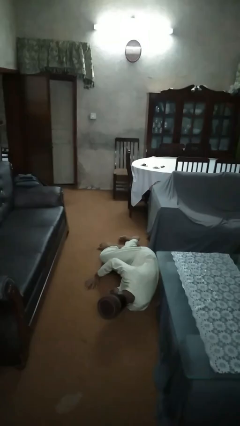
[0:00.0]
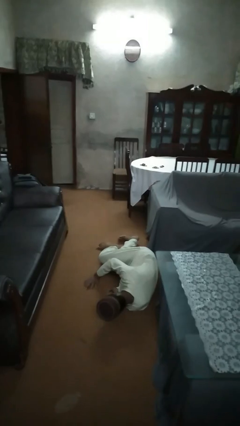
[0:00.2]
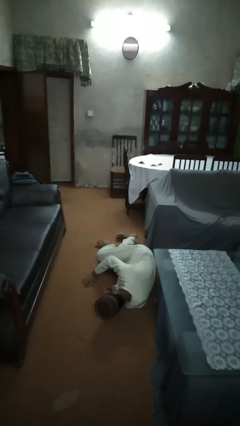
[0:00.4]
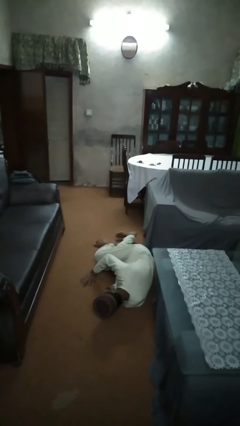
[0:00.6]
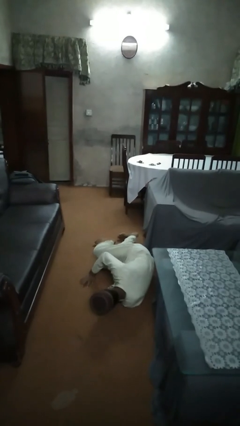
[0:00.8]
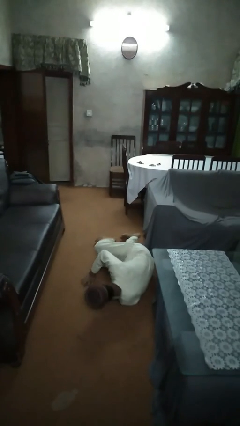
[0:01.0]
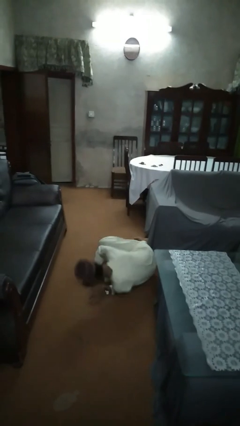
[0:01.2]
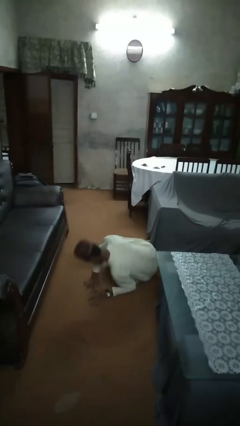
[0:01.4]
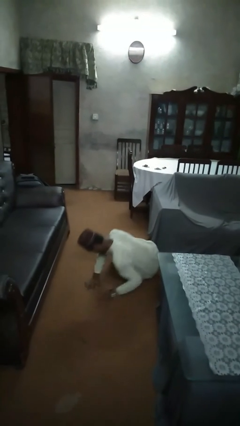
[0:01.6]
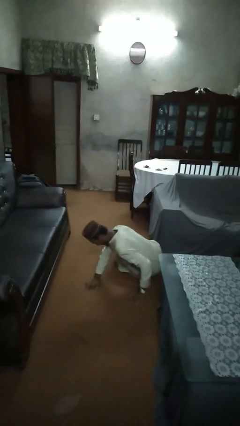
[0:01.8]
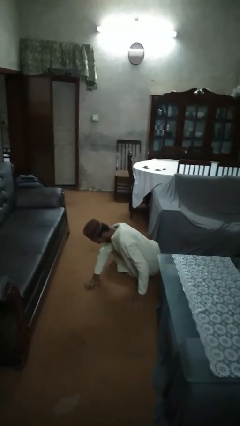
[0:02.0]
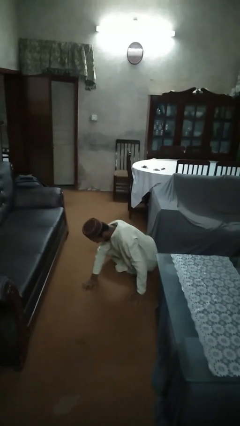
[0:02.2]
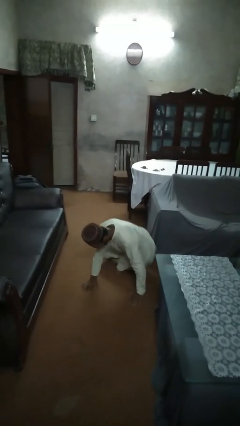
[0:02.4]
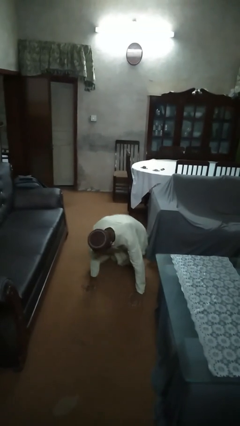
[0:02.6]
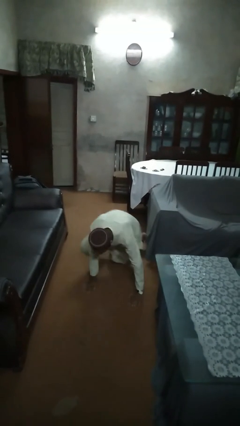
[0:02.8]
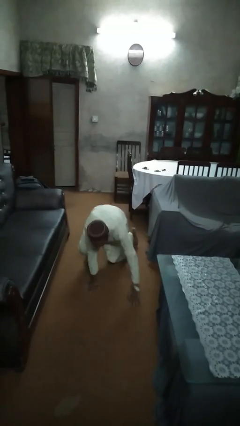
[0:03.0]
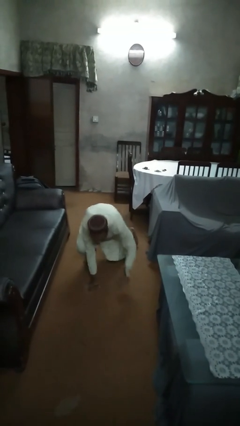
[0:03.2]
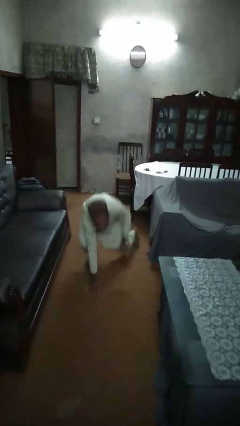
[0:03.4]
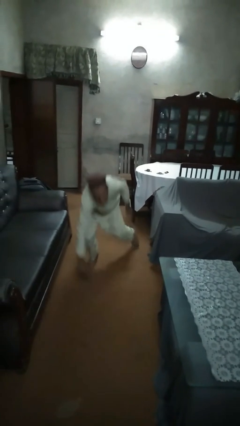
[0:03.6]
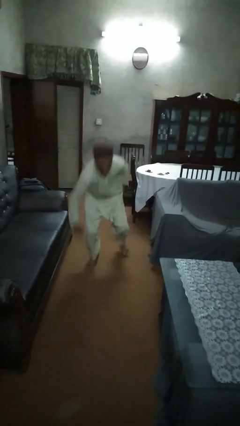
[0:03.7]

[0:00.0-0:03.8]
person stands up from floor

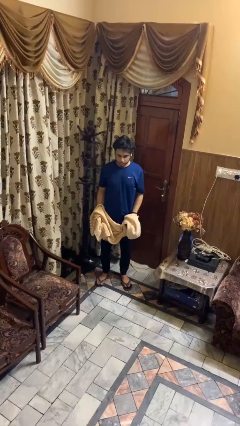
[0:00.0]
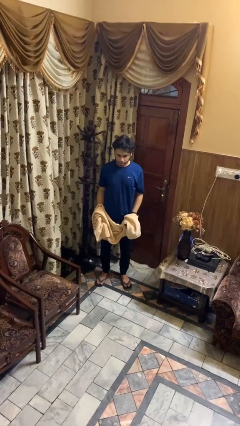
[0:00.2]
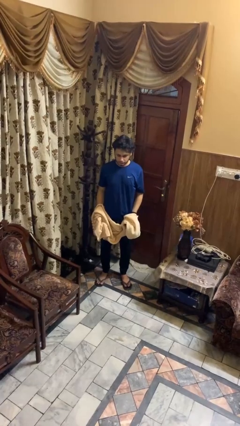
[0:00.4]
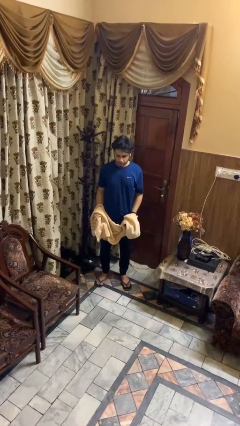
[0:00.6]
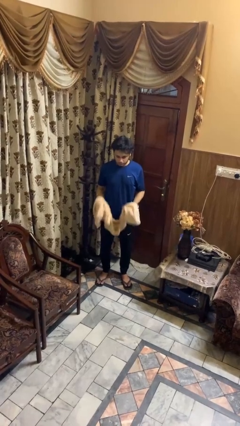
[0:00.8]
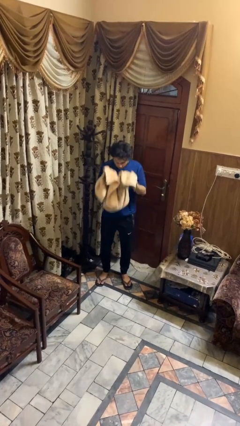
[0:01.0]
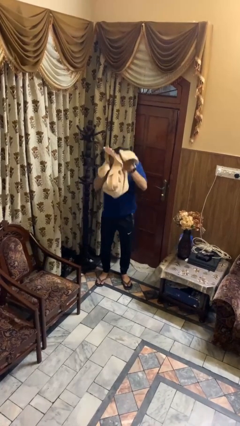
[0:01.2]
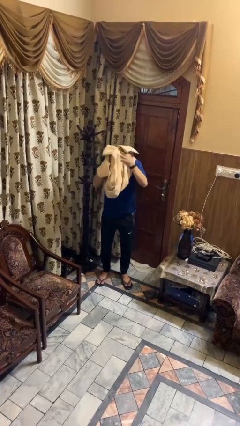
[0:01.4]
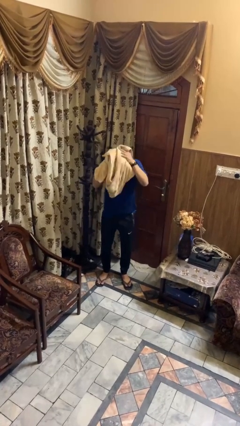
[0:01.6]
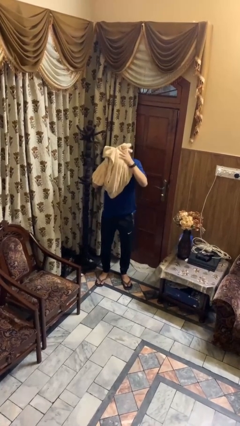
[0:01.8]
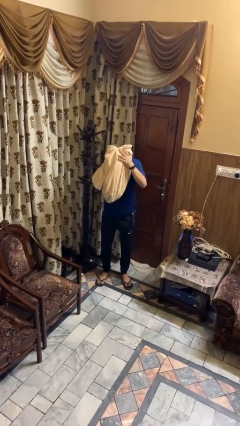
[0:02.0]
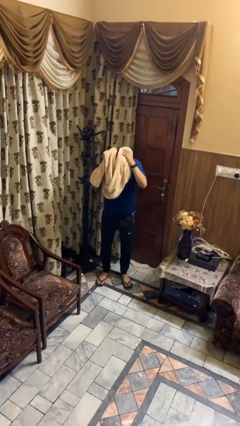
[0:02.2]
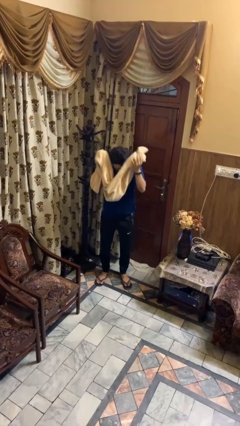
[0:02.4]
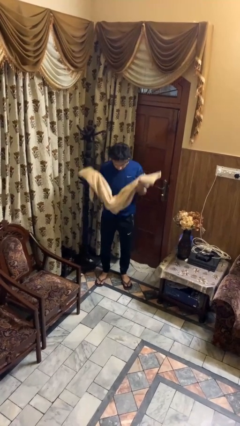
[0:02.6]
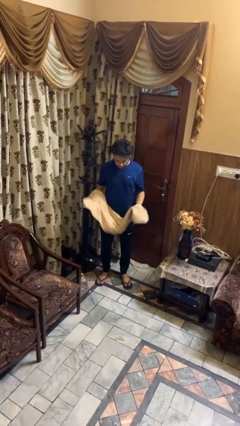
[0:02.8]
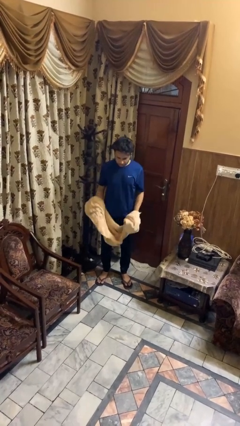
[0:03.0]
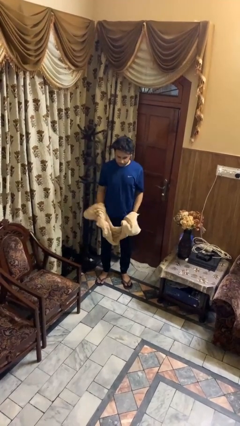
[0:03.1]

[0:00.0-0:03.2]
person dries hair with towel

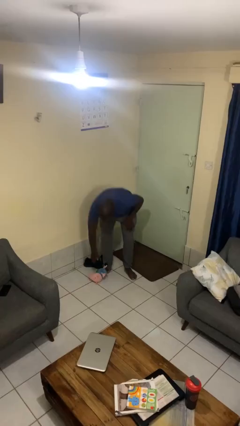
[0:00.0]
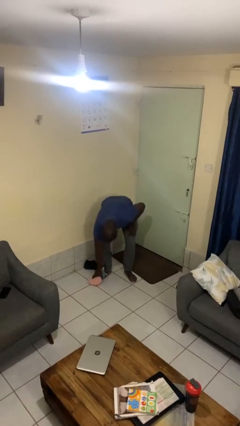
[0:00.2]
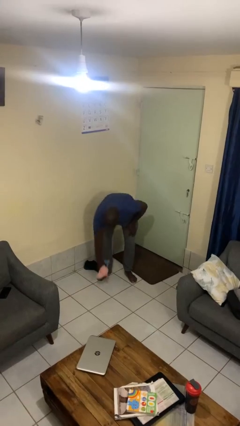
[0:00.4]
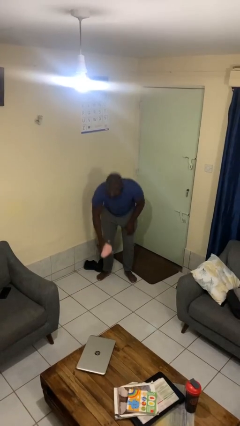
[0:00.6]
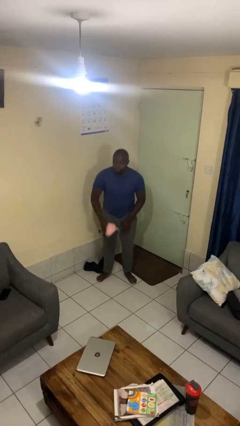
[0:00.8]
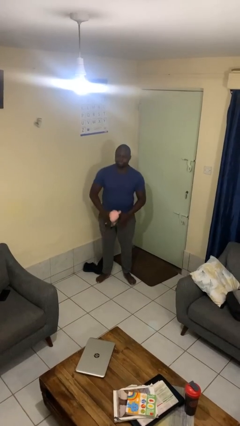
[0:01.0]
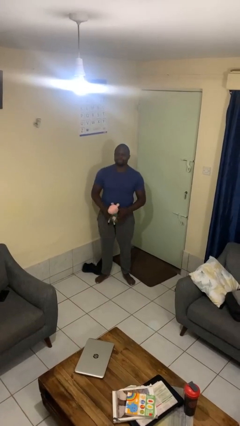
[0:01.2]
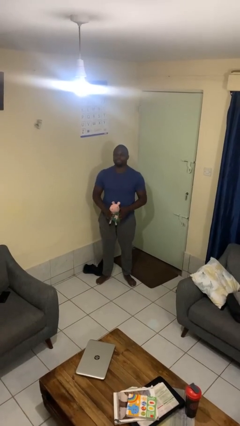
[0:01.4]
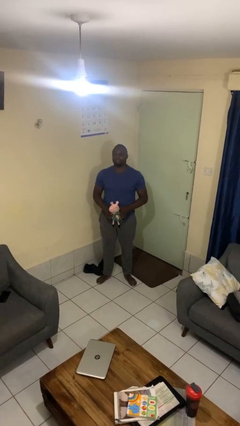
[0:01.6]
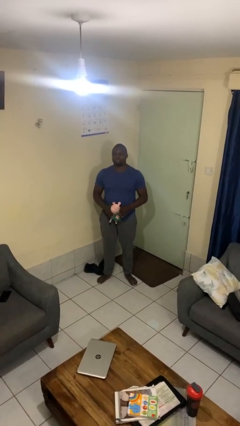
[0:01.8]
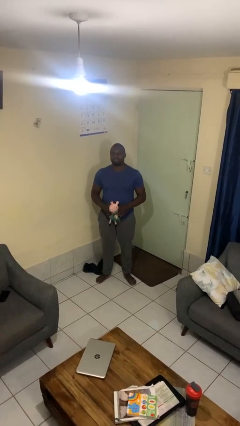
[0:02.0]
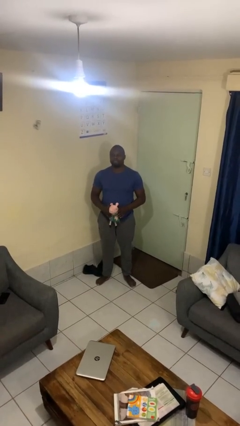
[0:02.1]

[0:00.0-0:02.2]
person picks up object from floor

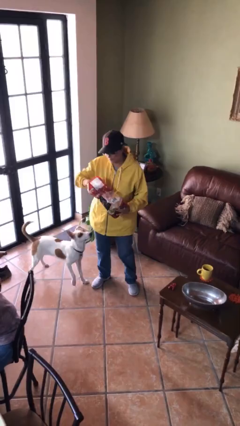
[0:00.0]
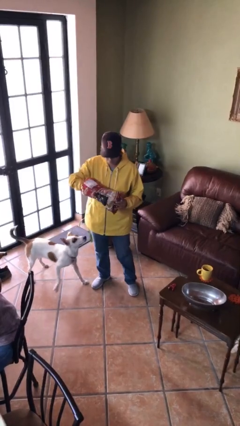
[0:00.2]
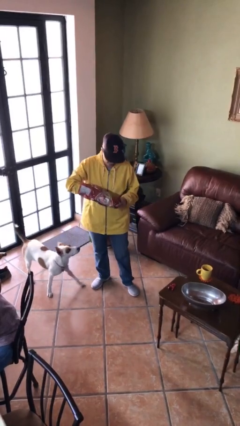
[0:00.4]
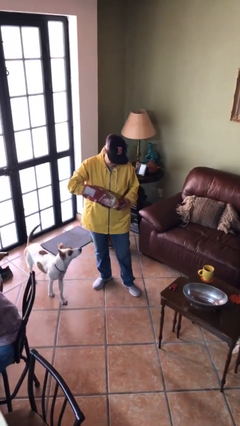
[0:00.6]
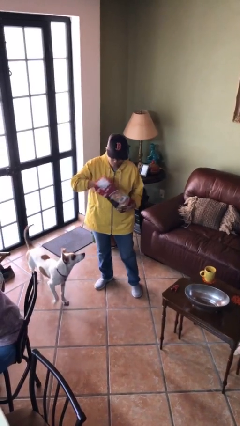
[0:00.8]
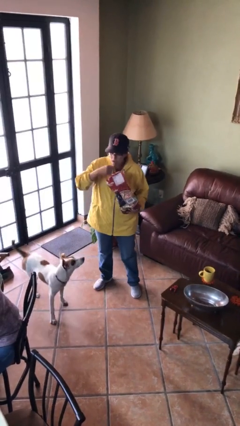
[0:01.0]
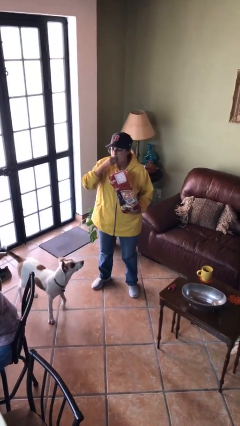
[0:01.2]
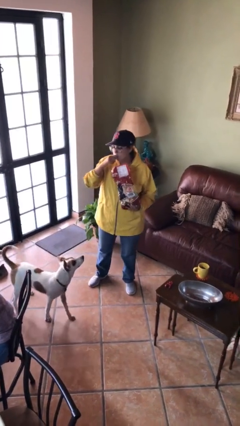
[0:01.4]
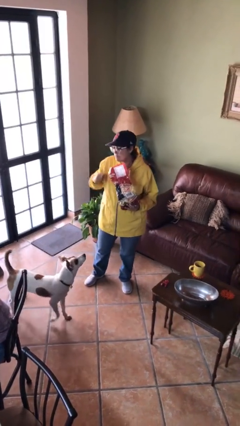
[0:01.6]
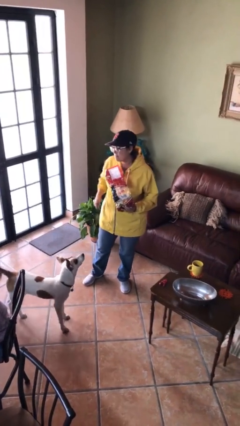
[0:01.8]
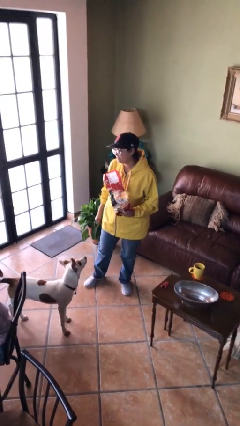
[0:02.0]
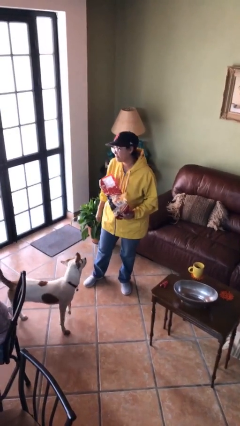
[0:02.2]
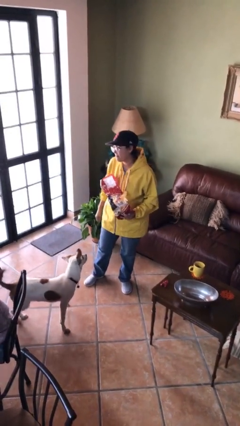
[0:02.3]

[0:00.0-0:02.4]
person eats snack from bag

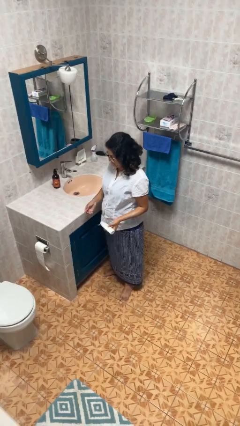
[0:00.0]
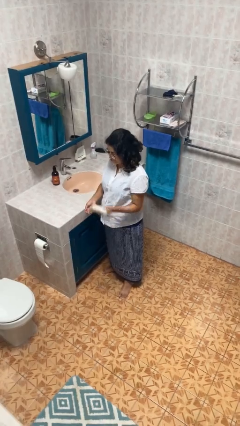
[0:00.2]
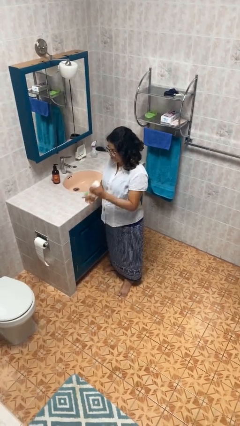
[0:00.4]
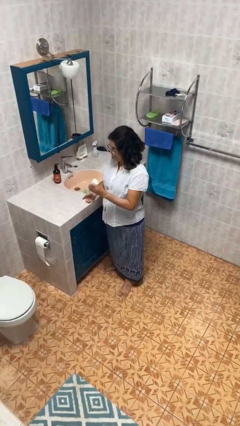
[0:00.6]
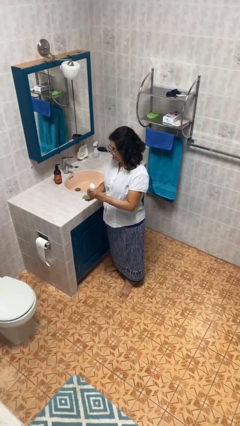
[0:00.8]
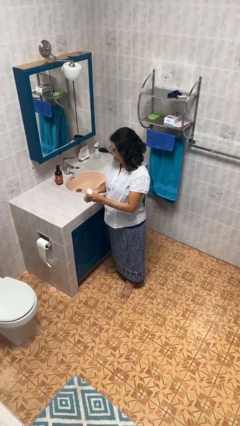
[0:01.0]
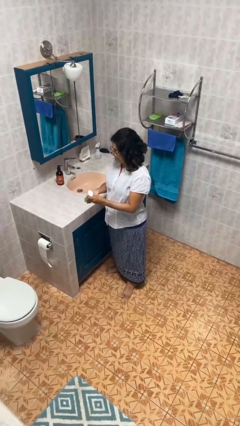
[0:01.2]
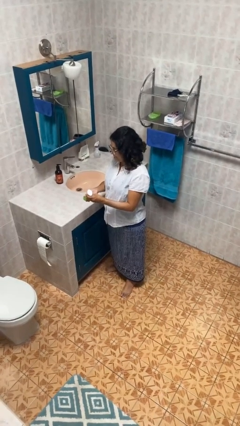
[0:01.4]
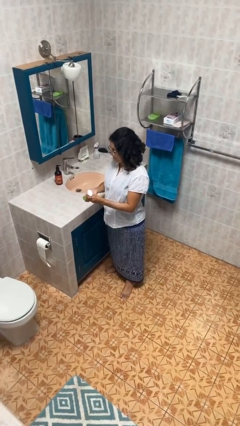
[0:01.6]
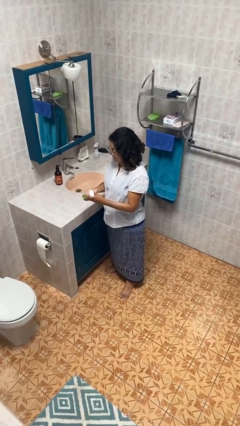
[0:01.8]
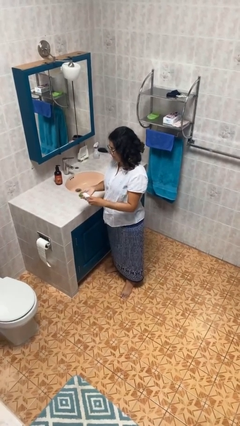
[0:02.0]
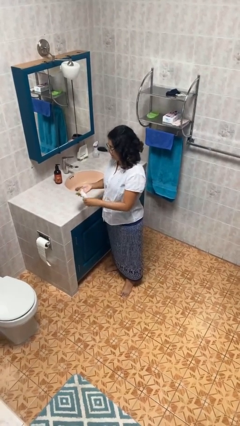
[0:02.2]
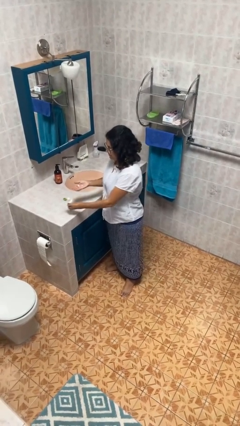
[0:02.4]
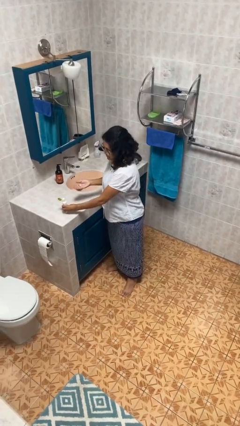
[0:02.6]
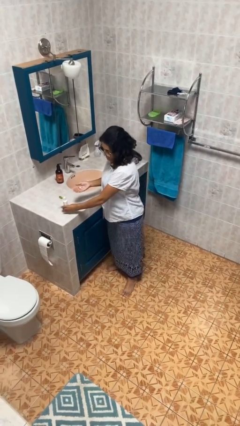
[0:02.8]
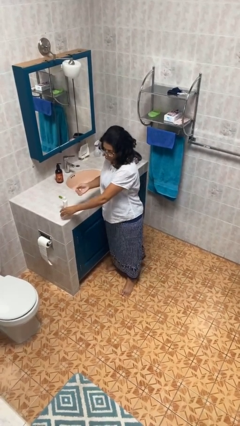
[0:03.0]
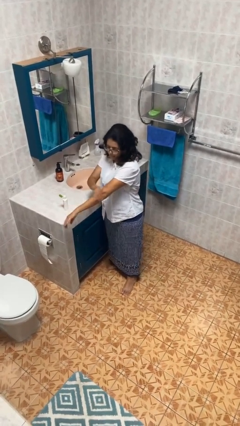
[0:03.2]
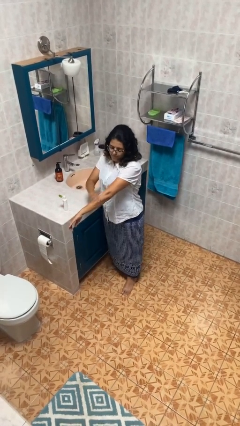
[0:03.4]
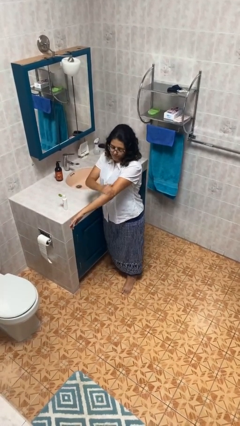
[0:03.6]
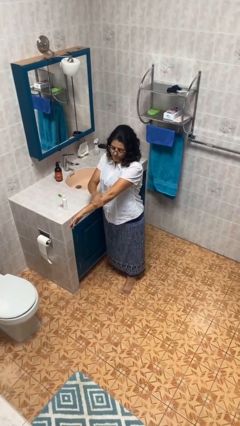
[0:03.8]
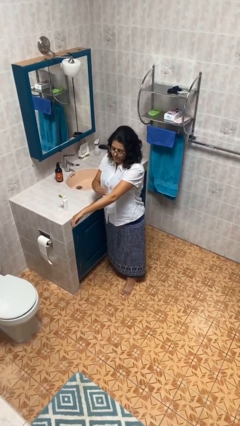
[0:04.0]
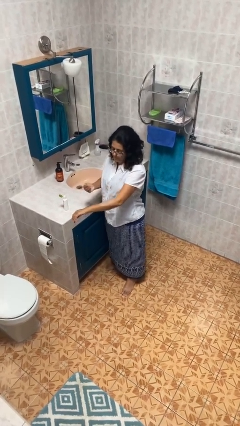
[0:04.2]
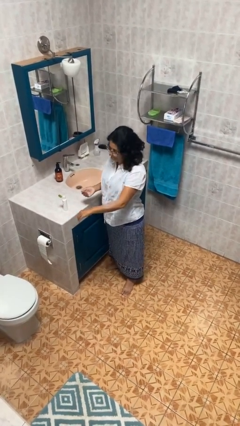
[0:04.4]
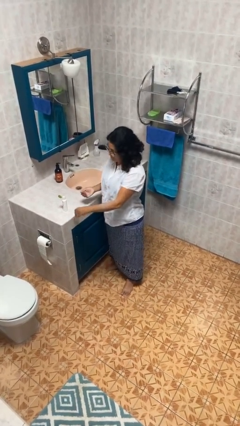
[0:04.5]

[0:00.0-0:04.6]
person applies sunscreen

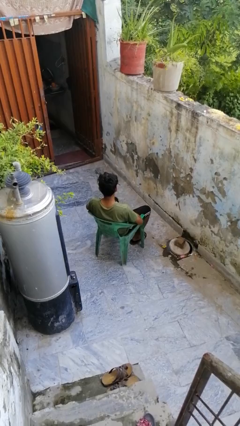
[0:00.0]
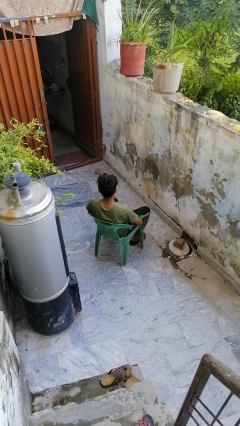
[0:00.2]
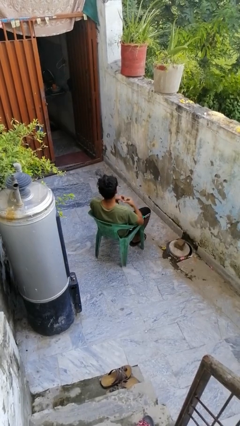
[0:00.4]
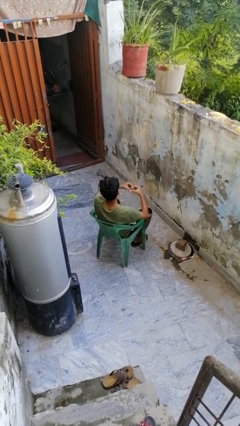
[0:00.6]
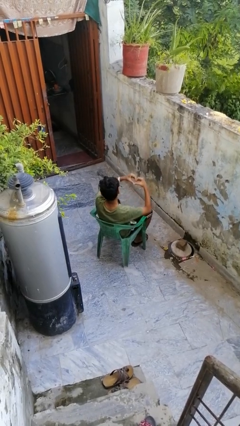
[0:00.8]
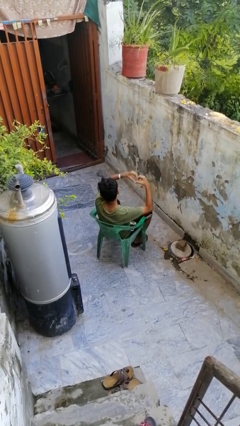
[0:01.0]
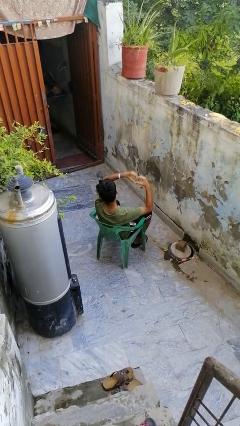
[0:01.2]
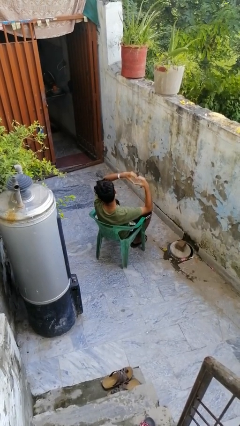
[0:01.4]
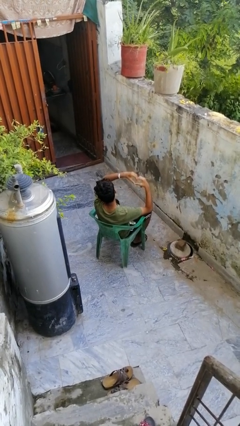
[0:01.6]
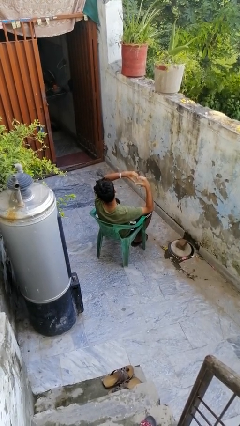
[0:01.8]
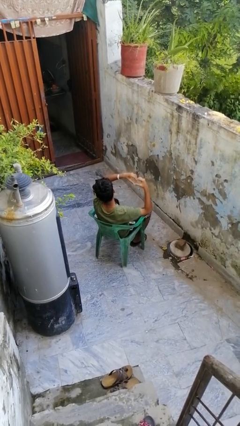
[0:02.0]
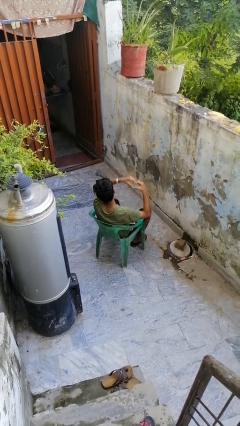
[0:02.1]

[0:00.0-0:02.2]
person gestures heart
